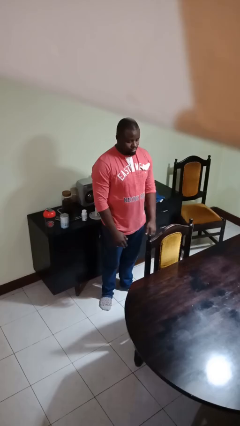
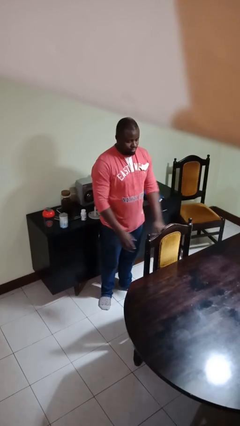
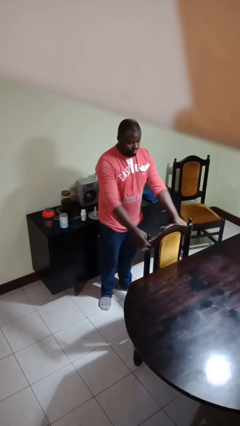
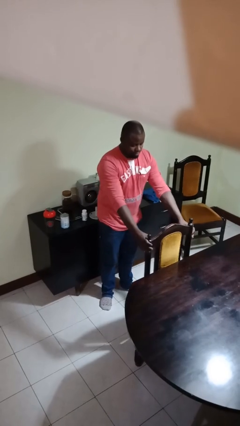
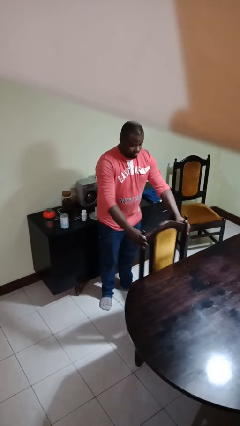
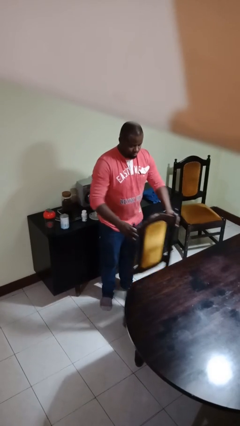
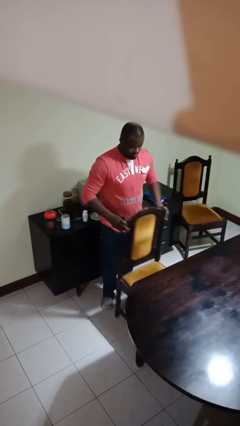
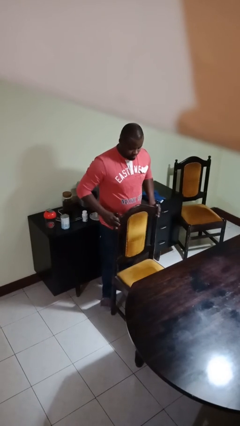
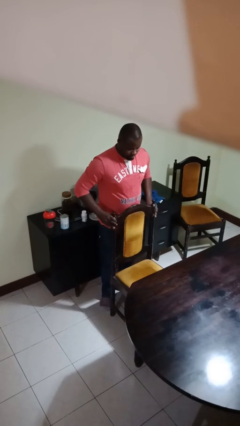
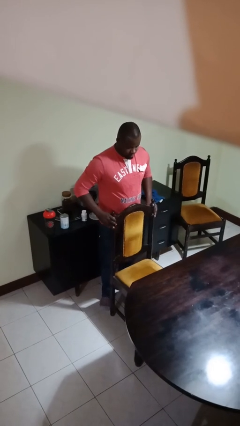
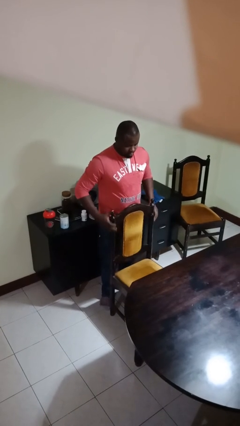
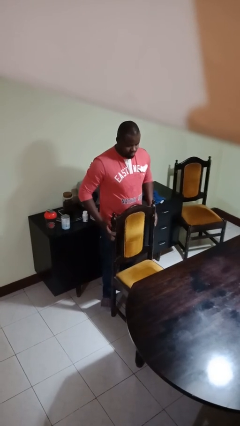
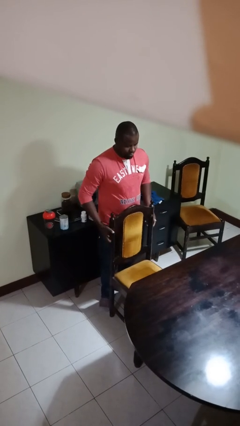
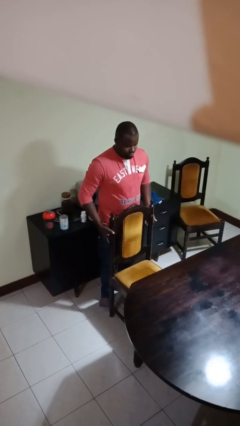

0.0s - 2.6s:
person pulls out chair

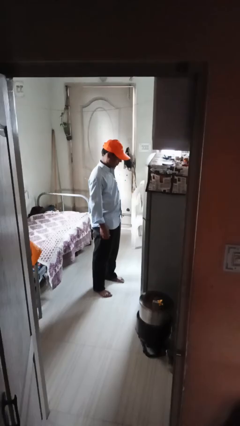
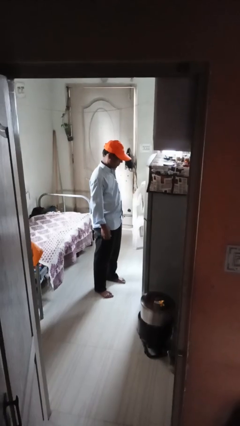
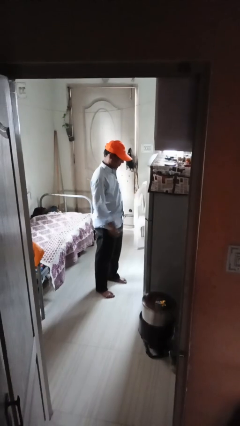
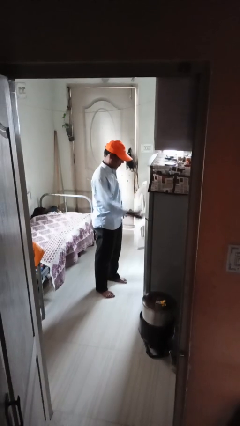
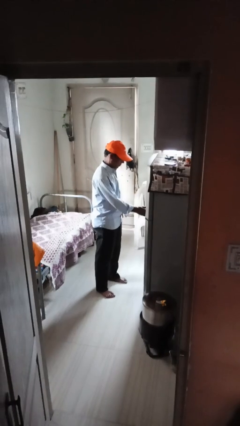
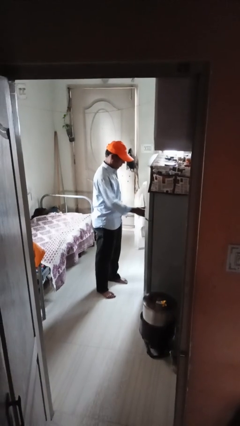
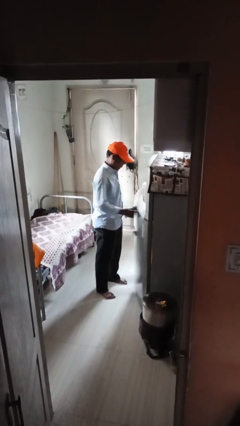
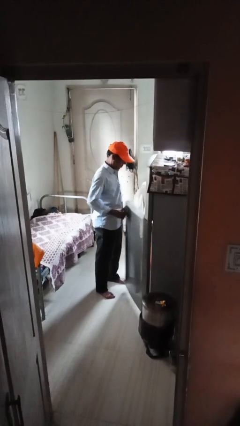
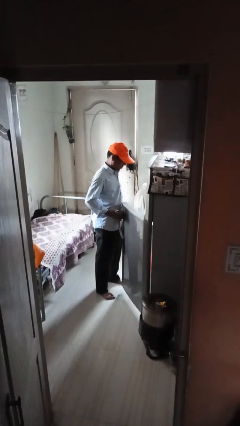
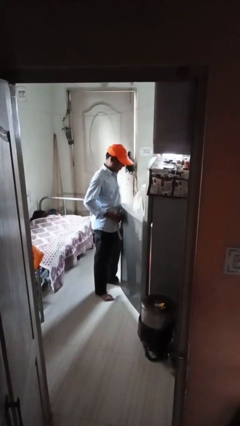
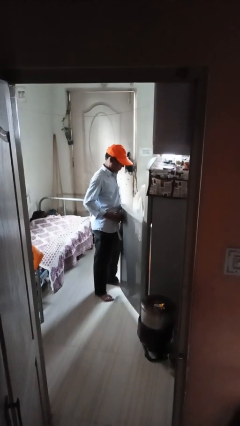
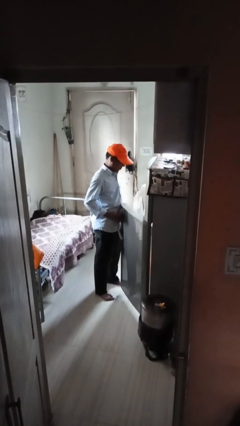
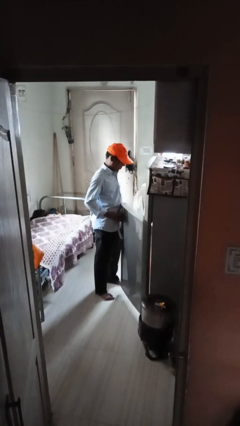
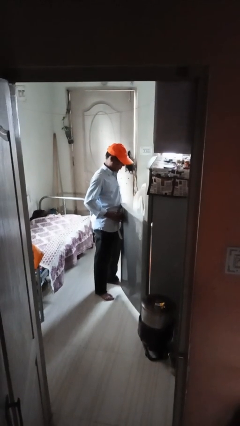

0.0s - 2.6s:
person opens refrigerator

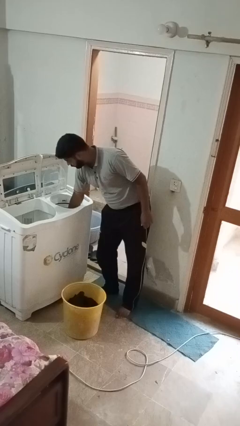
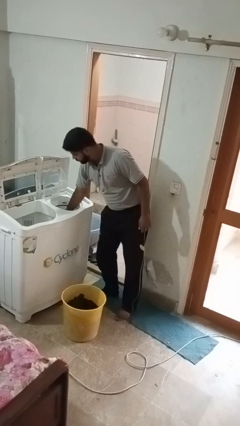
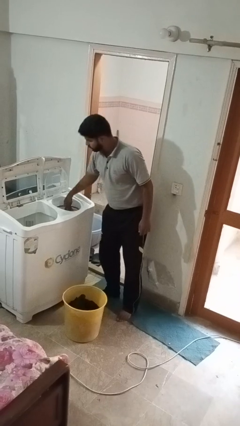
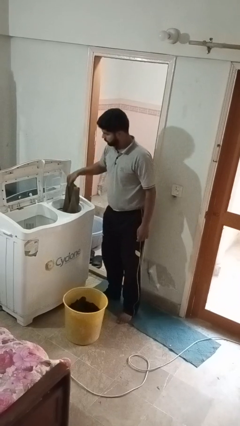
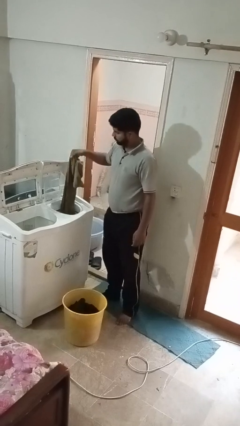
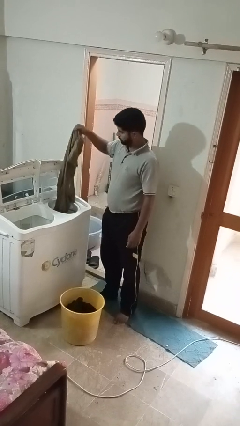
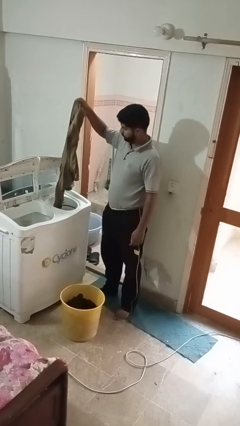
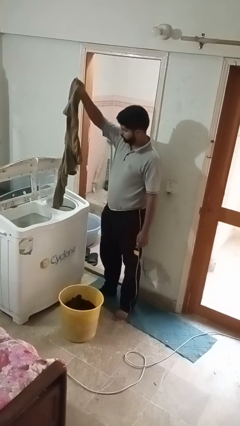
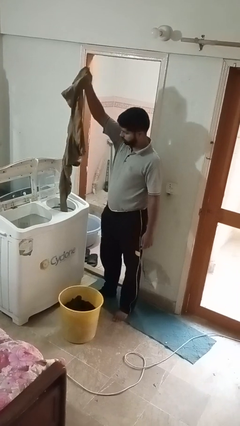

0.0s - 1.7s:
person unloads dryer

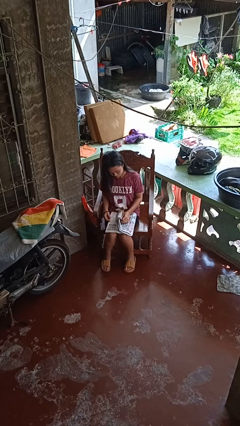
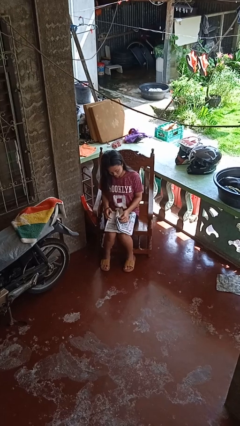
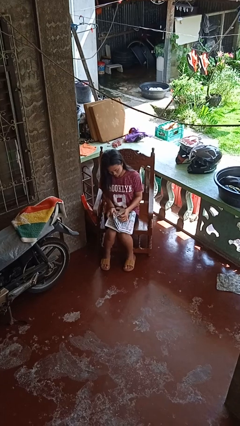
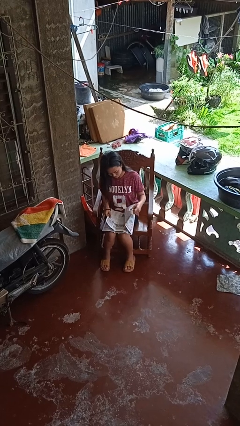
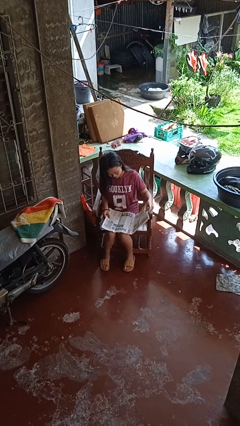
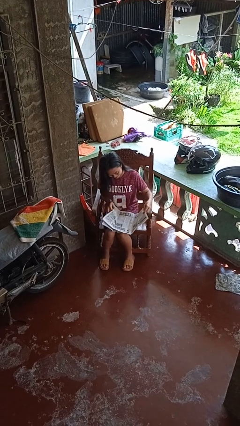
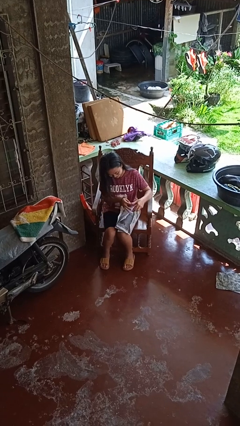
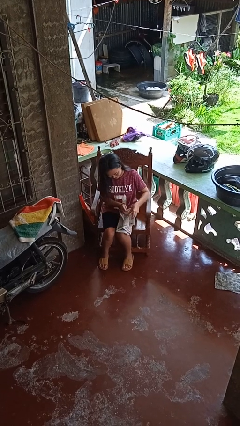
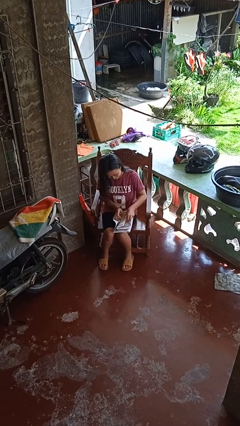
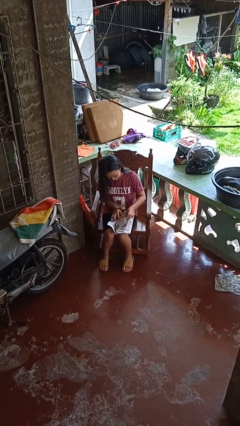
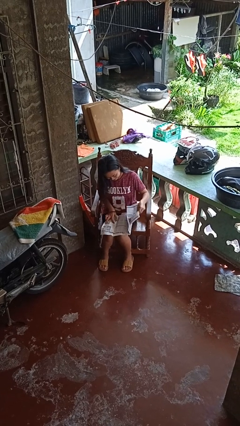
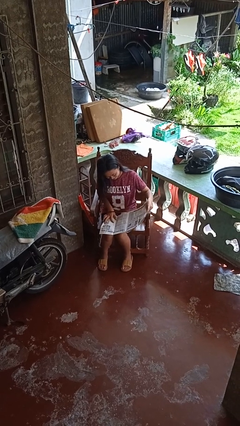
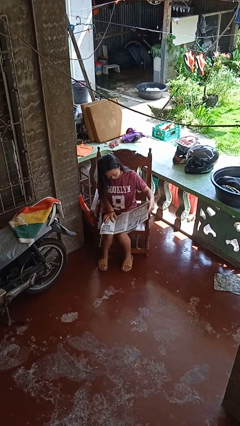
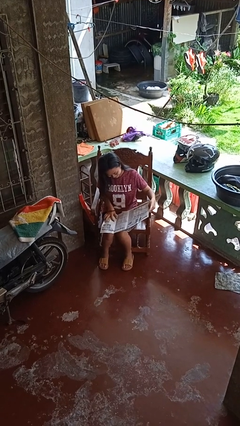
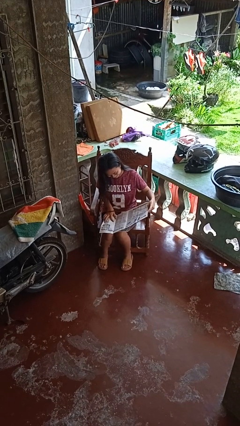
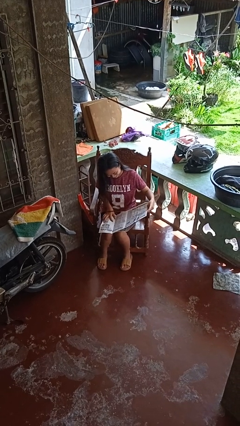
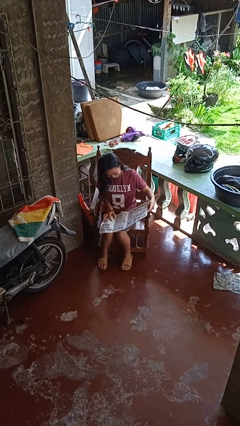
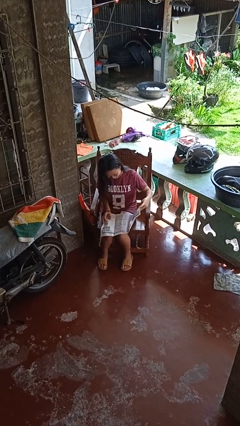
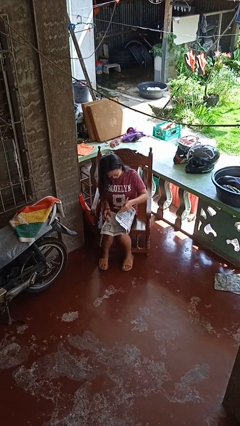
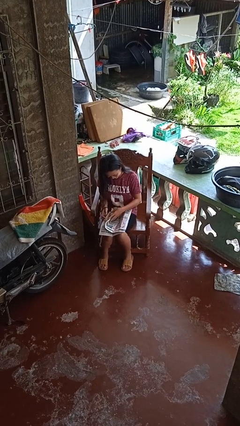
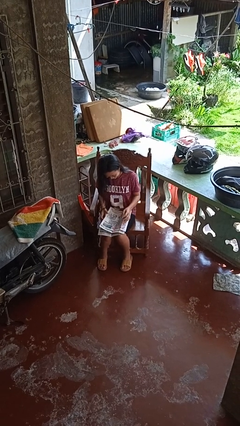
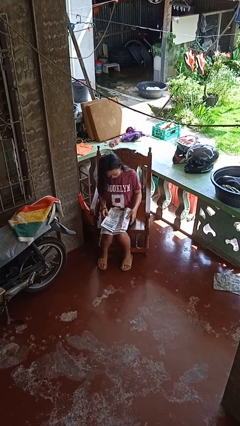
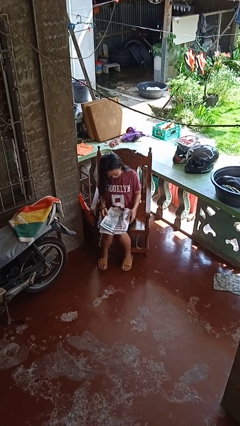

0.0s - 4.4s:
person reads newspaper

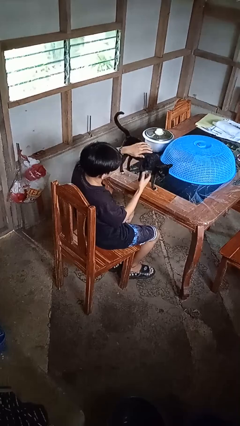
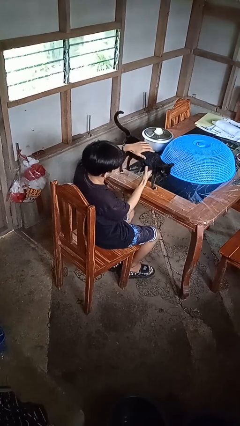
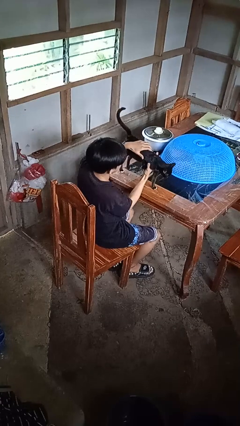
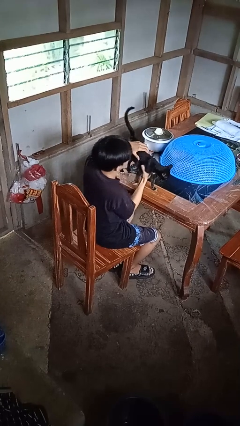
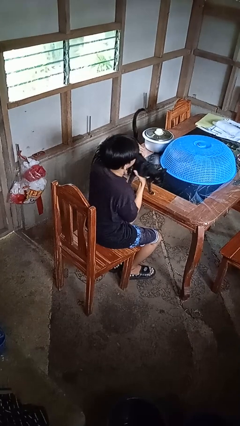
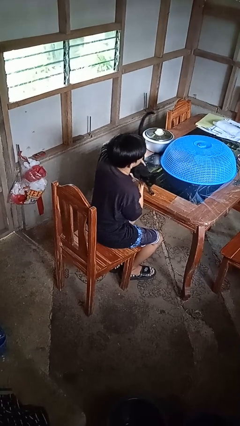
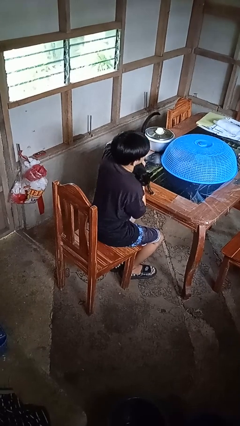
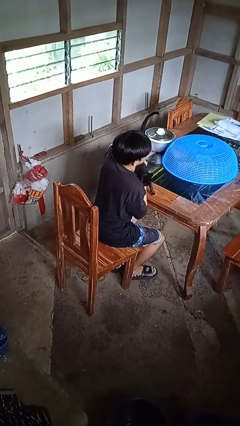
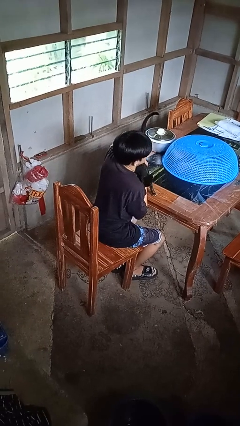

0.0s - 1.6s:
person hugs cat

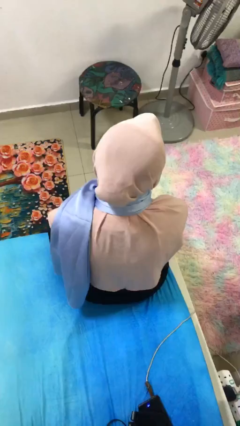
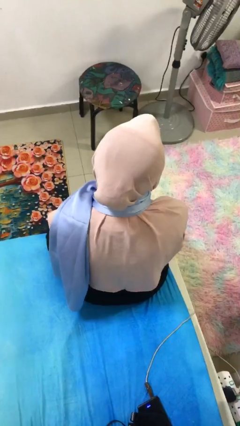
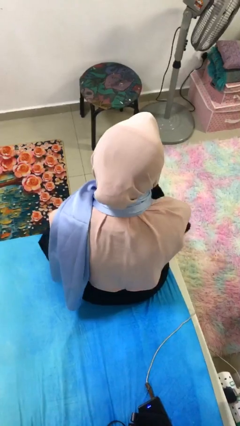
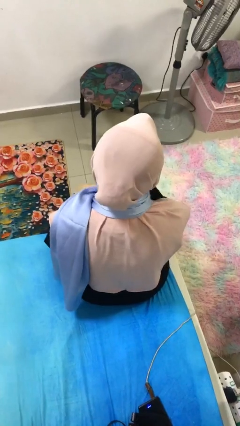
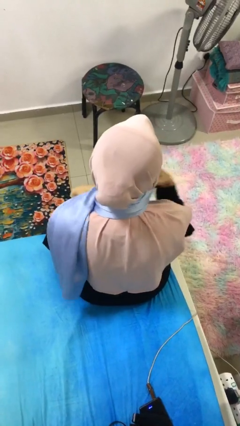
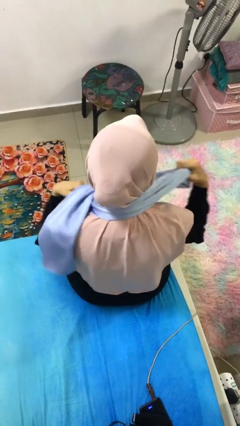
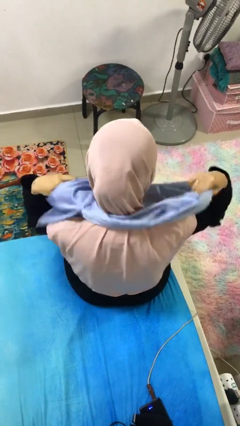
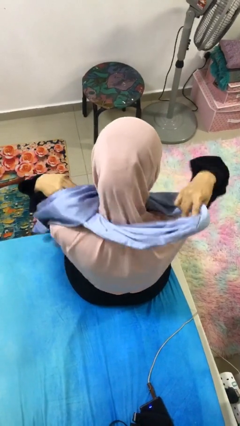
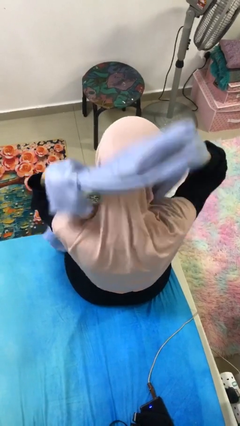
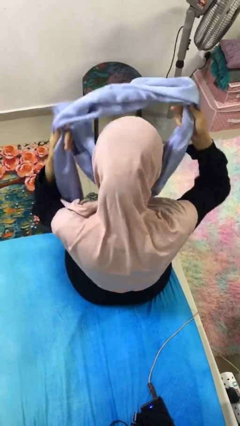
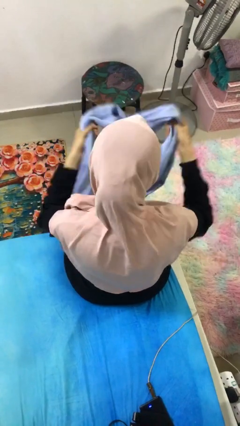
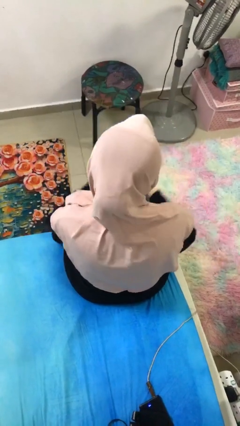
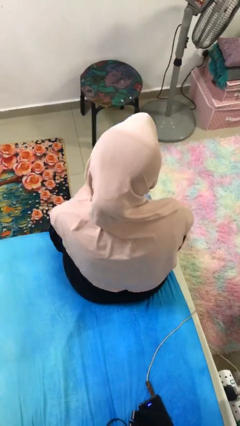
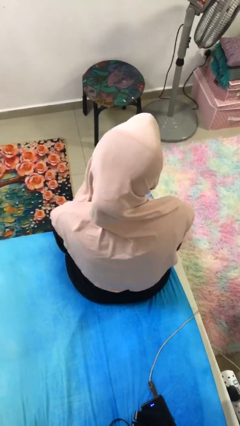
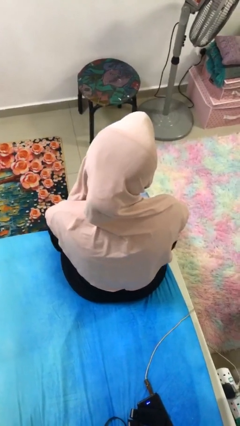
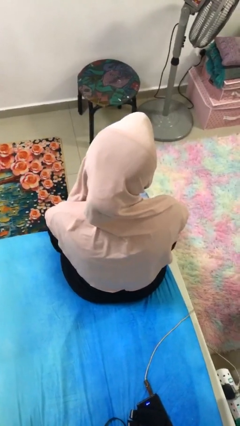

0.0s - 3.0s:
person takes off scarf

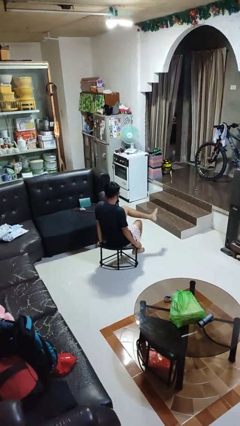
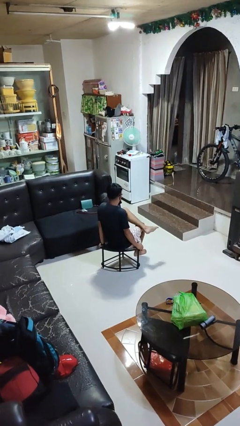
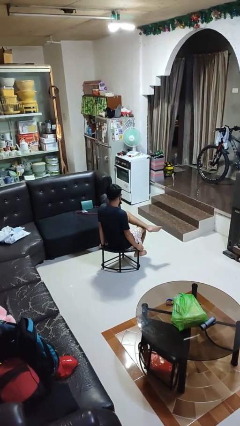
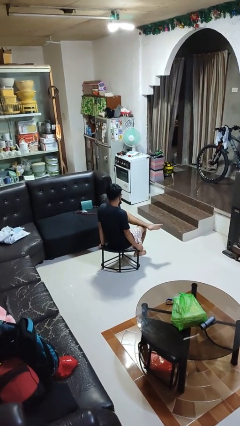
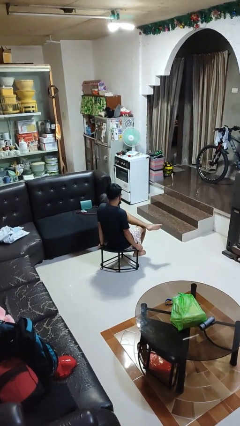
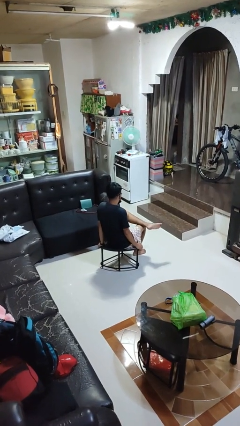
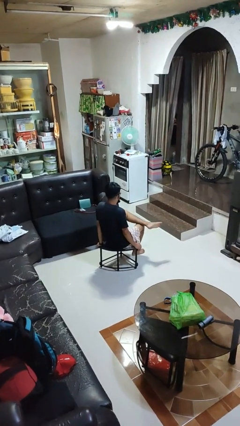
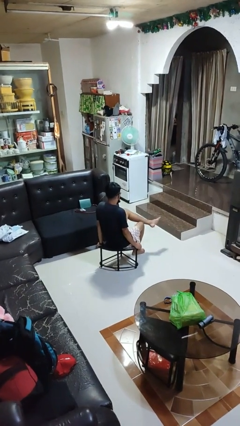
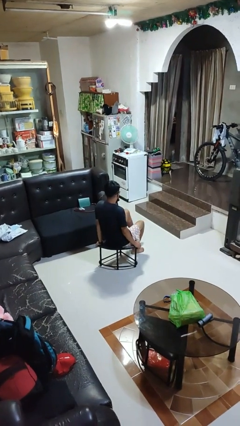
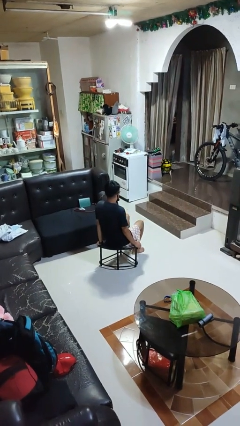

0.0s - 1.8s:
person crosses legs
